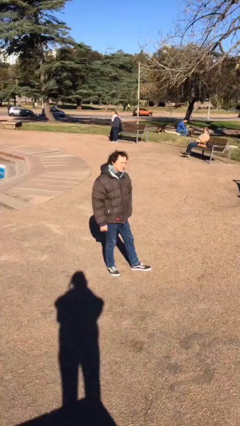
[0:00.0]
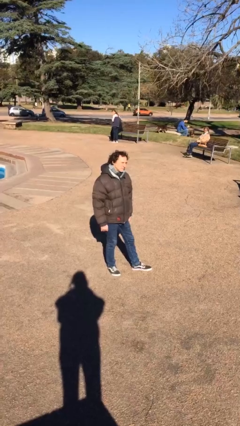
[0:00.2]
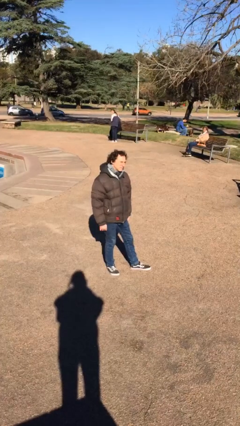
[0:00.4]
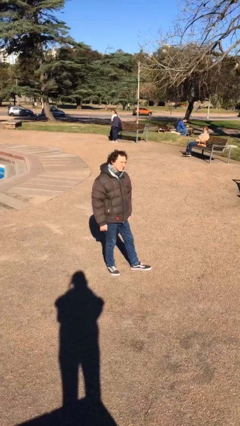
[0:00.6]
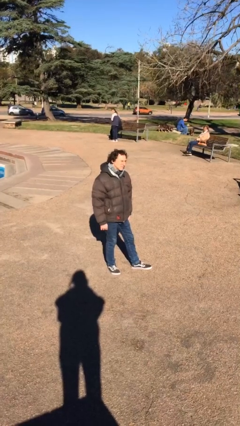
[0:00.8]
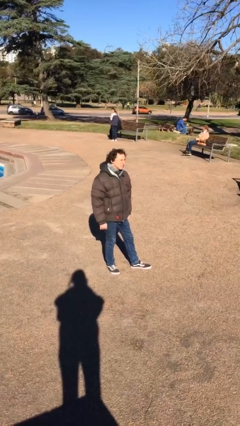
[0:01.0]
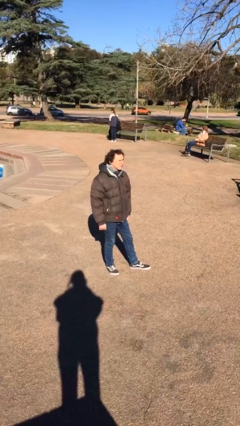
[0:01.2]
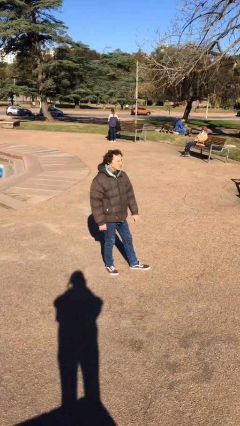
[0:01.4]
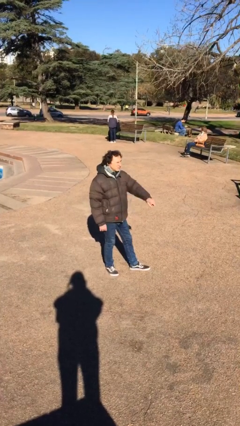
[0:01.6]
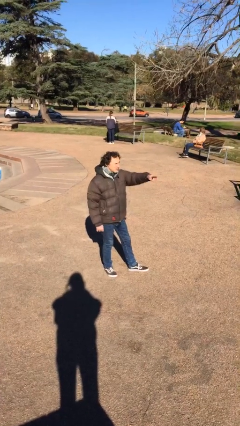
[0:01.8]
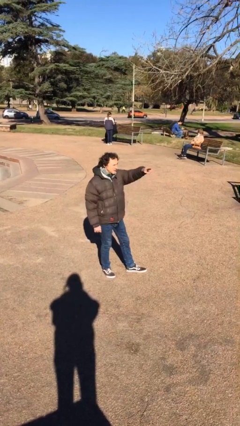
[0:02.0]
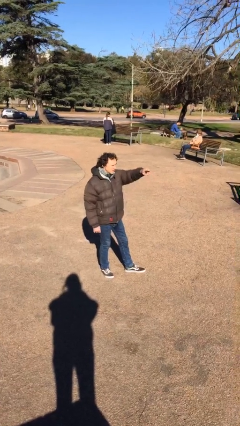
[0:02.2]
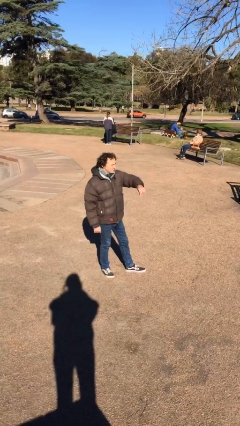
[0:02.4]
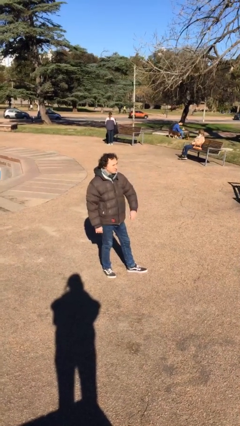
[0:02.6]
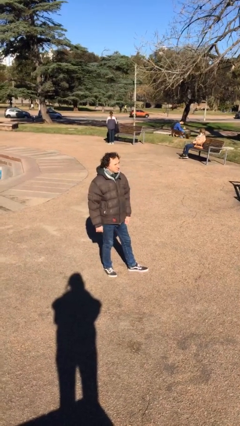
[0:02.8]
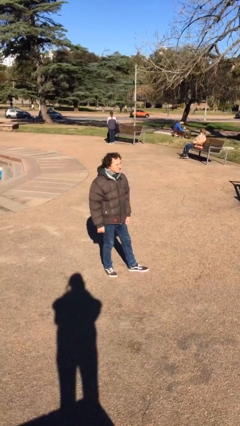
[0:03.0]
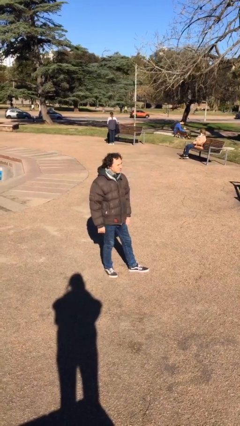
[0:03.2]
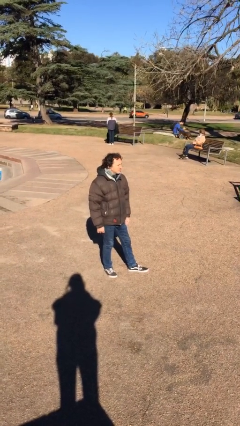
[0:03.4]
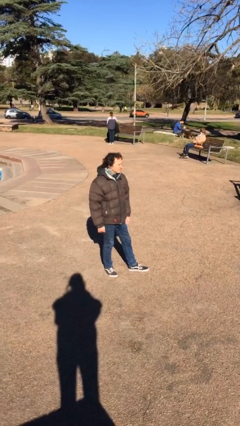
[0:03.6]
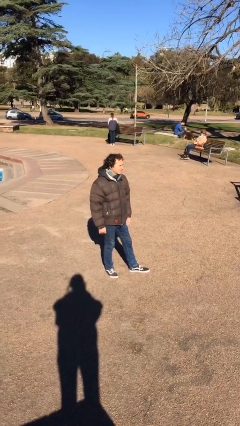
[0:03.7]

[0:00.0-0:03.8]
person points at person

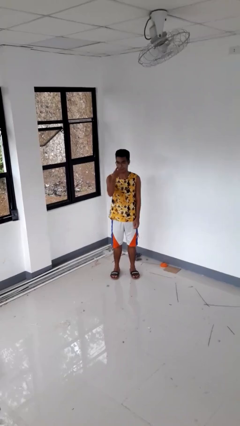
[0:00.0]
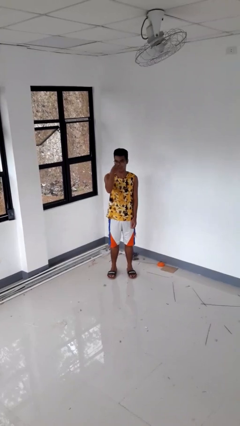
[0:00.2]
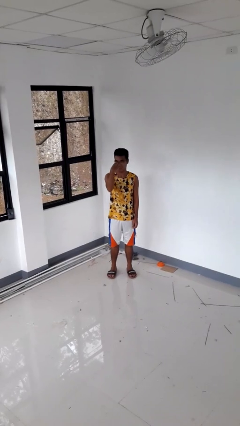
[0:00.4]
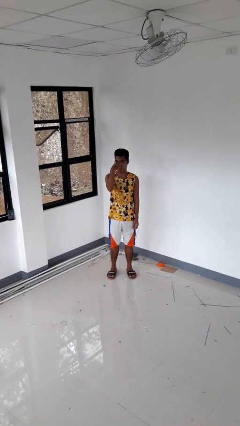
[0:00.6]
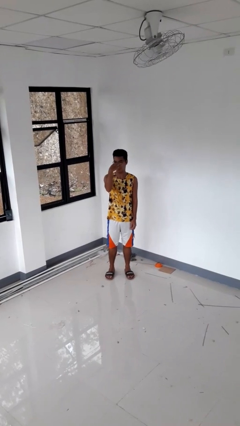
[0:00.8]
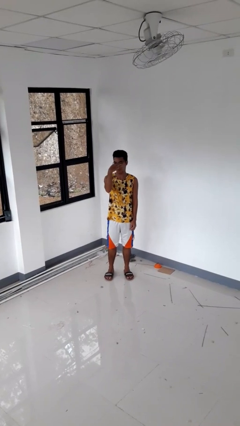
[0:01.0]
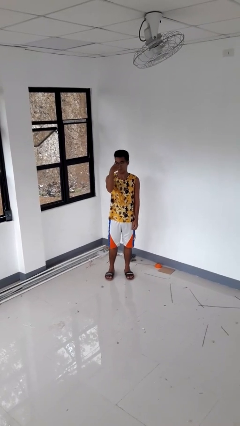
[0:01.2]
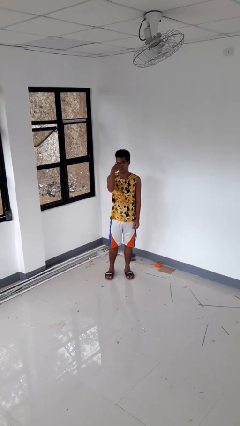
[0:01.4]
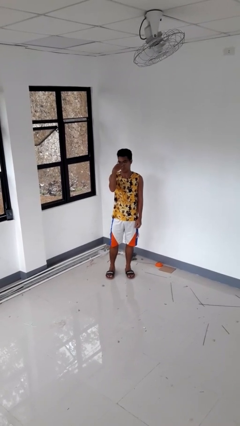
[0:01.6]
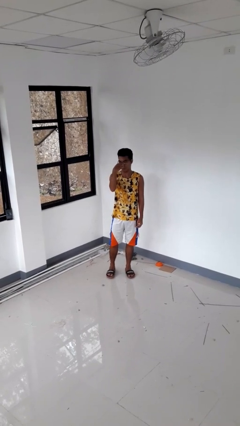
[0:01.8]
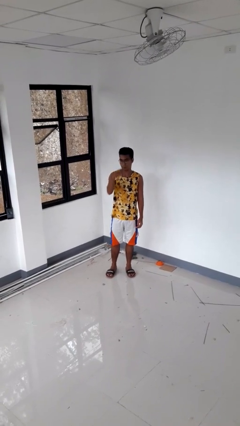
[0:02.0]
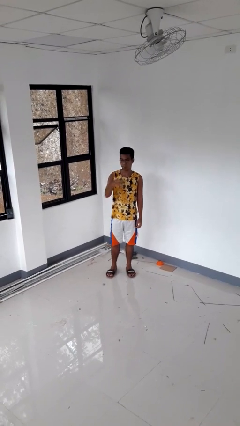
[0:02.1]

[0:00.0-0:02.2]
person gestures watch closely

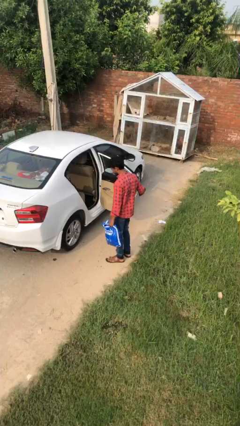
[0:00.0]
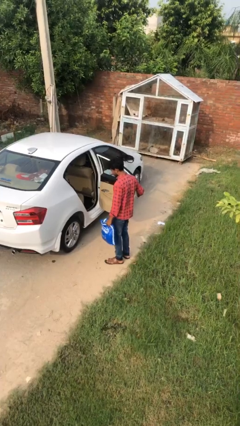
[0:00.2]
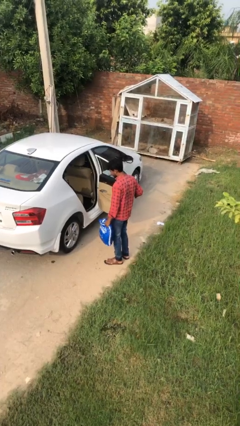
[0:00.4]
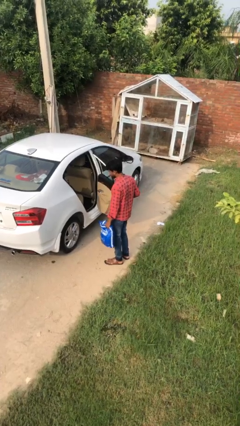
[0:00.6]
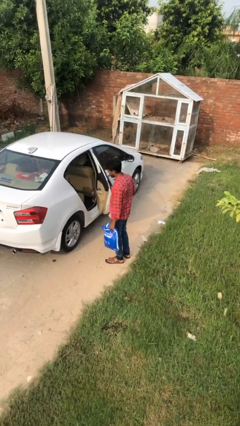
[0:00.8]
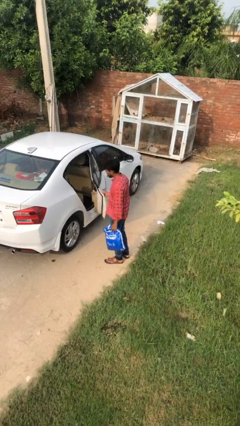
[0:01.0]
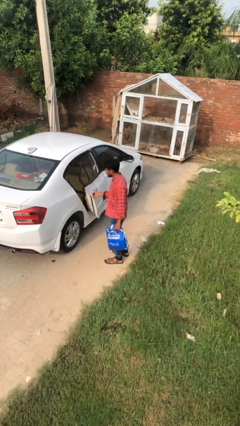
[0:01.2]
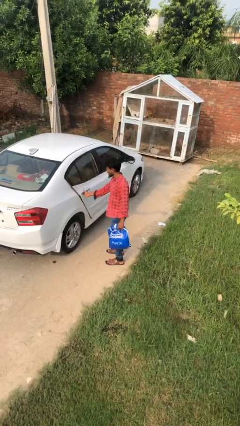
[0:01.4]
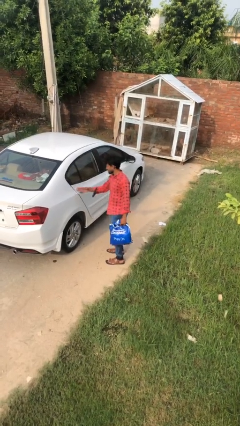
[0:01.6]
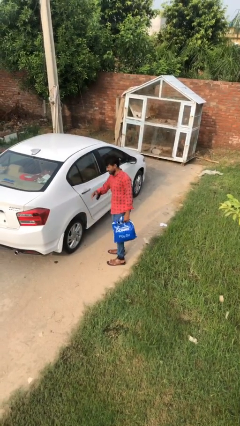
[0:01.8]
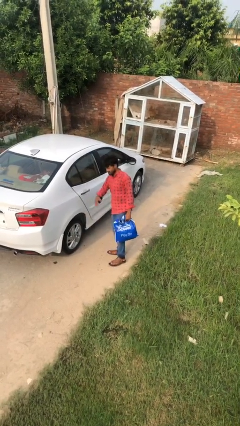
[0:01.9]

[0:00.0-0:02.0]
person closes car door

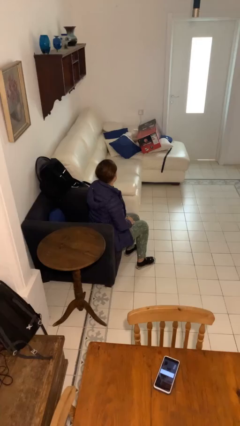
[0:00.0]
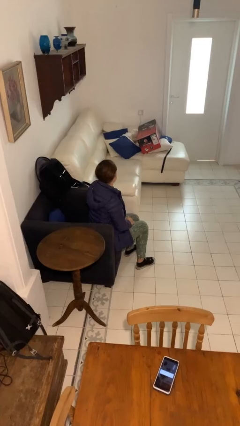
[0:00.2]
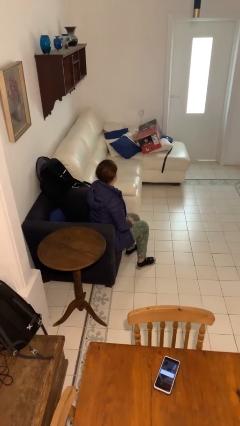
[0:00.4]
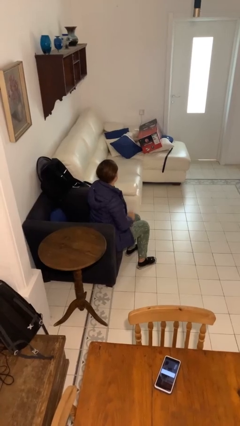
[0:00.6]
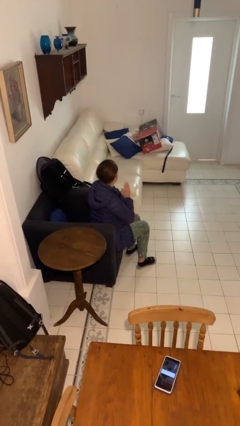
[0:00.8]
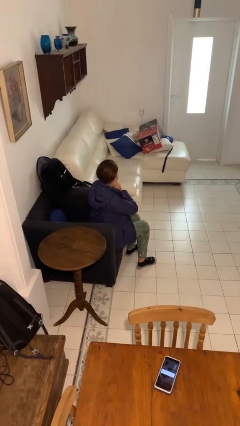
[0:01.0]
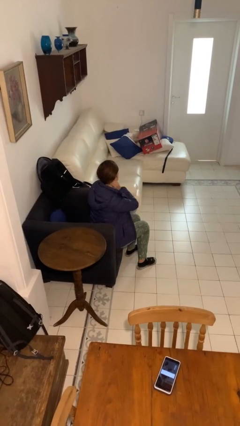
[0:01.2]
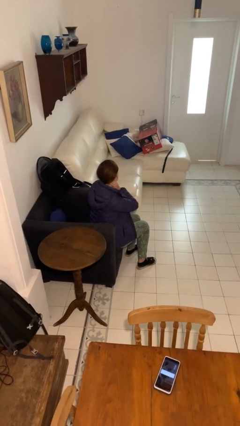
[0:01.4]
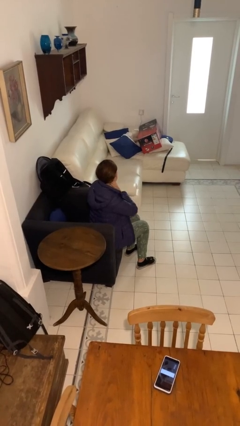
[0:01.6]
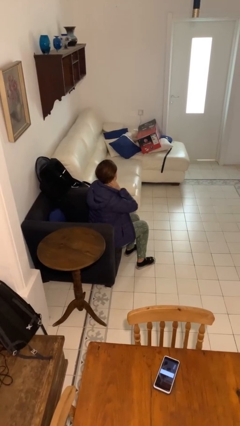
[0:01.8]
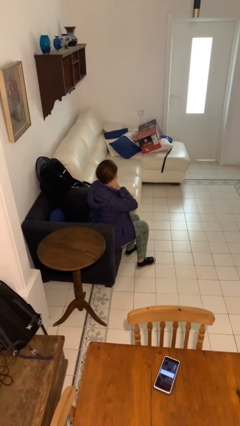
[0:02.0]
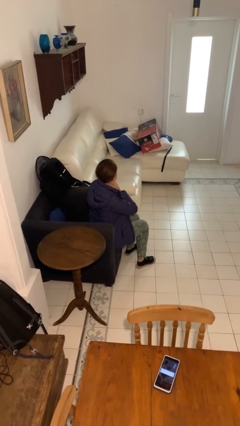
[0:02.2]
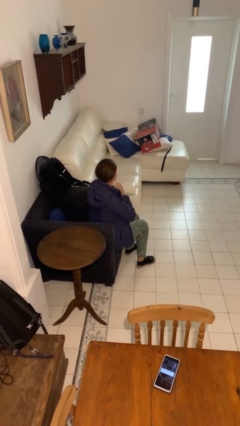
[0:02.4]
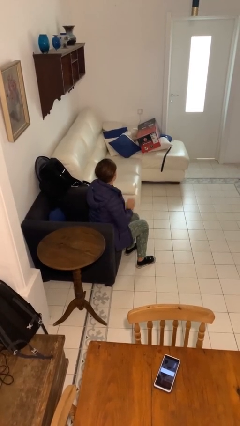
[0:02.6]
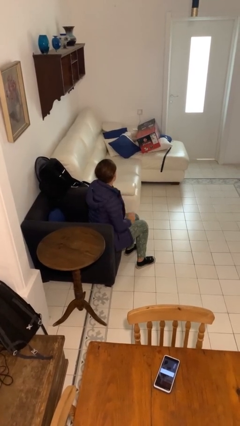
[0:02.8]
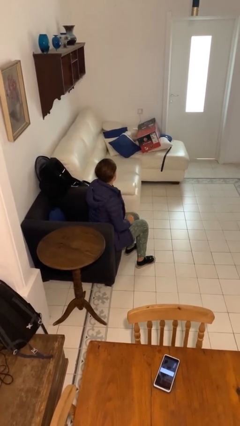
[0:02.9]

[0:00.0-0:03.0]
person rubs neck

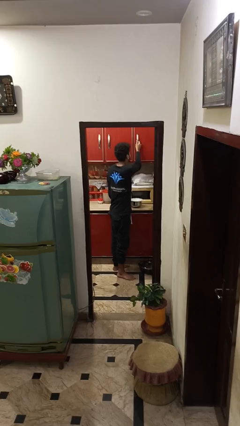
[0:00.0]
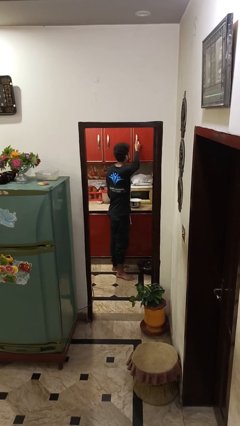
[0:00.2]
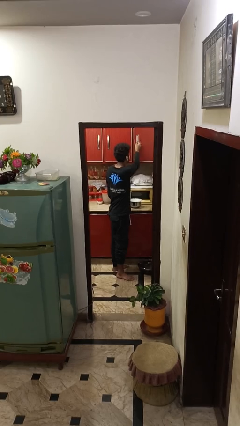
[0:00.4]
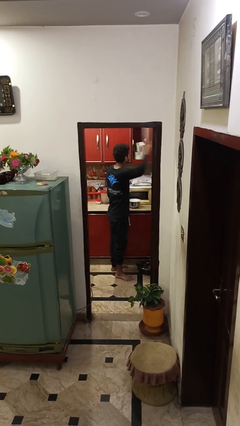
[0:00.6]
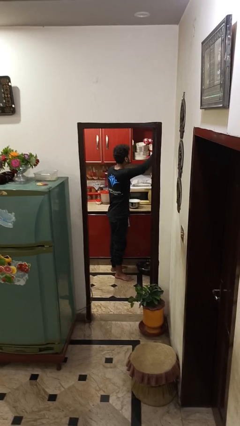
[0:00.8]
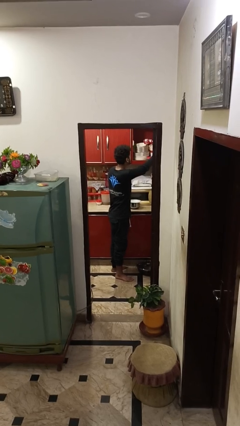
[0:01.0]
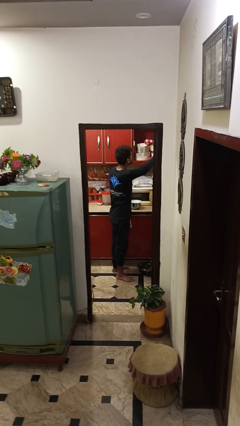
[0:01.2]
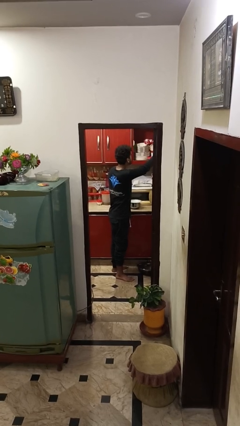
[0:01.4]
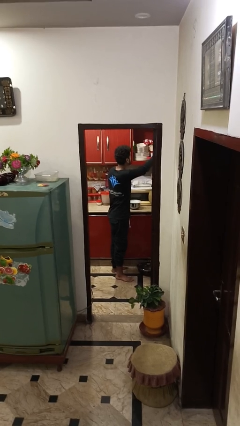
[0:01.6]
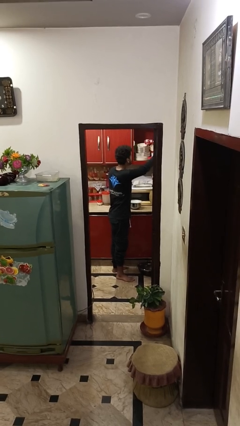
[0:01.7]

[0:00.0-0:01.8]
person opens cabinet

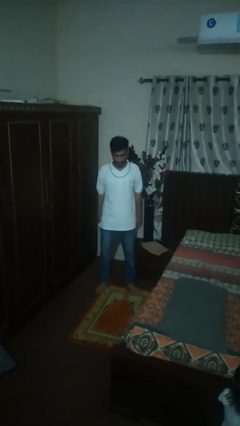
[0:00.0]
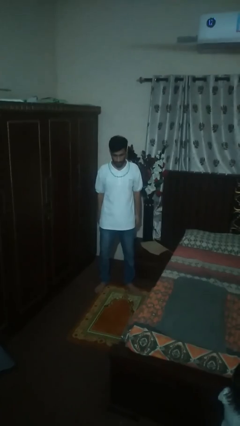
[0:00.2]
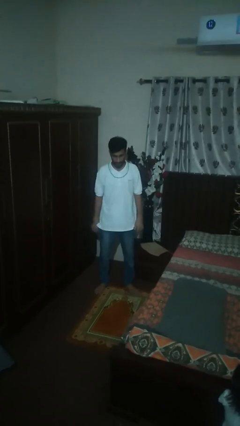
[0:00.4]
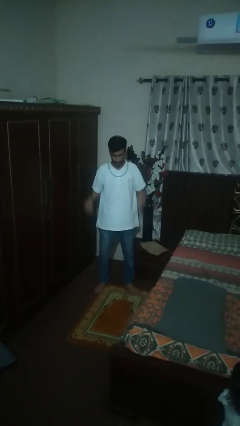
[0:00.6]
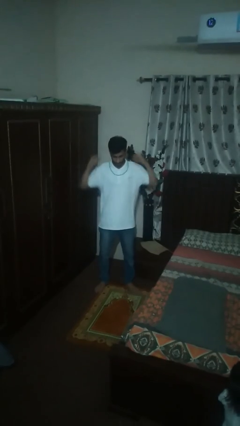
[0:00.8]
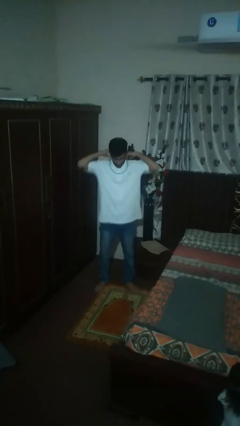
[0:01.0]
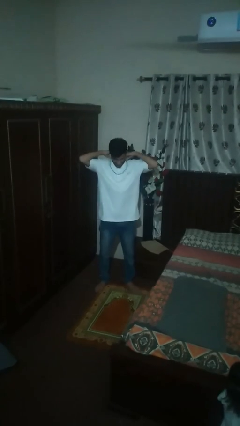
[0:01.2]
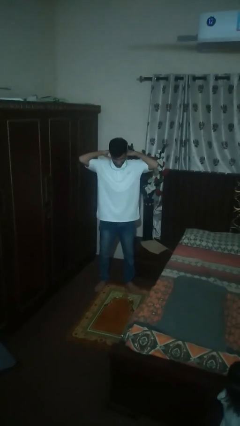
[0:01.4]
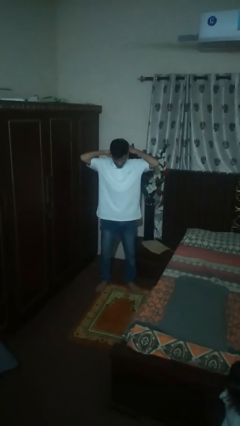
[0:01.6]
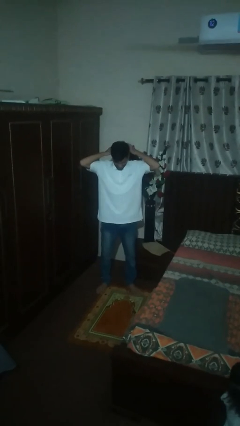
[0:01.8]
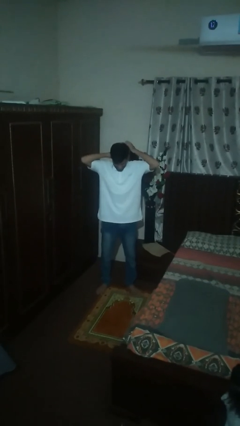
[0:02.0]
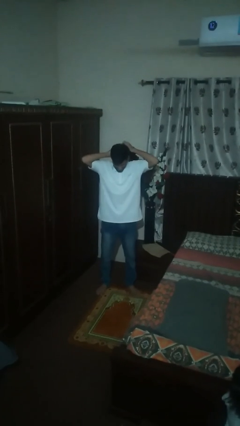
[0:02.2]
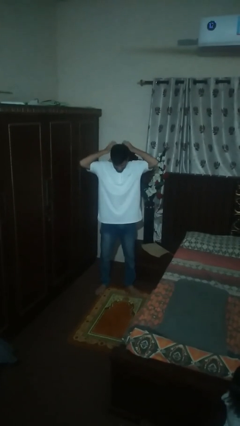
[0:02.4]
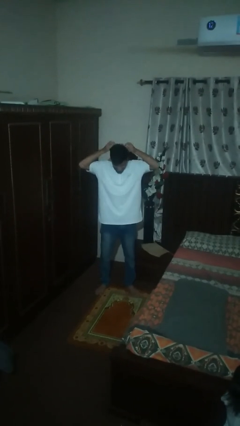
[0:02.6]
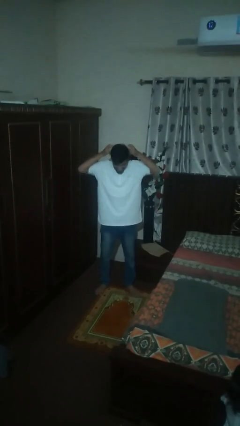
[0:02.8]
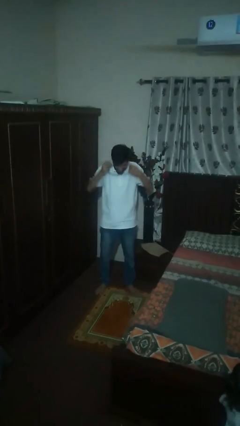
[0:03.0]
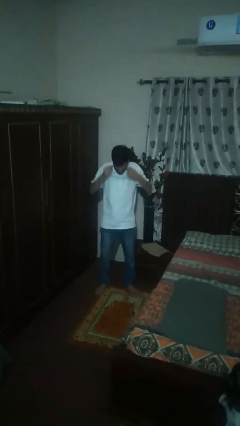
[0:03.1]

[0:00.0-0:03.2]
person takes off necklace

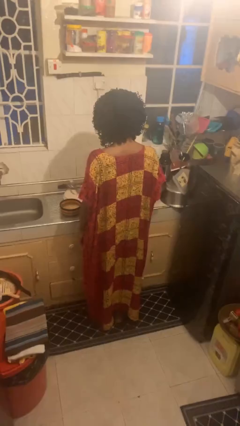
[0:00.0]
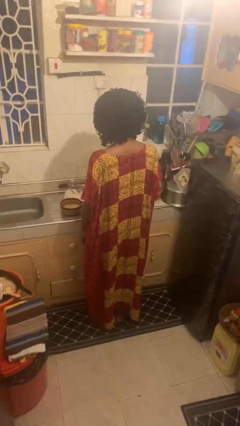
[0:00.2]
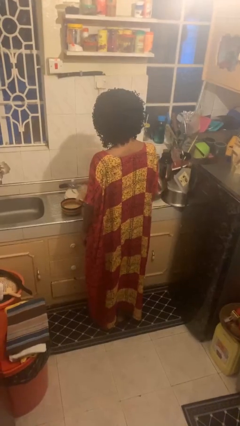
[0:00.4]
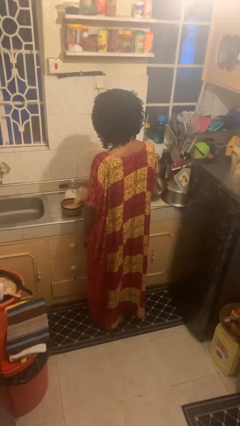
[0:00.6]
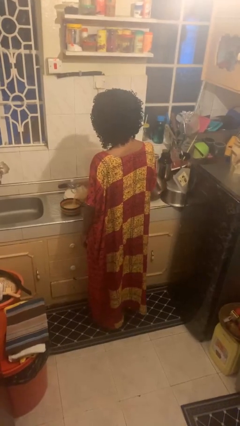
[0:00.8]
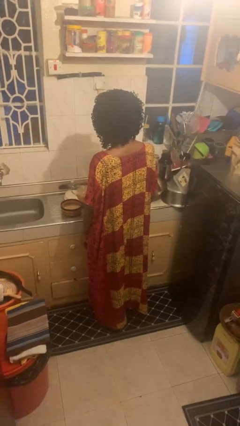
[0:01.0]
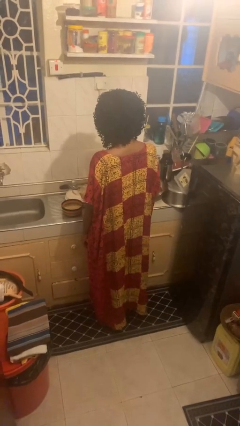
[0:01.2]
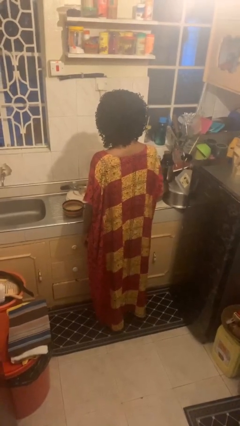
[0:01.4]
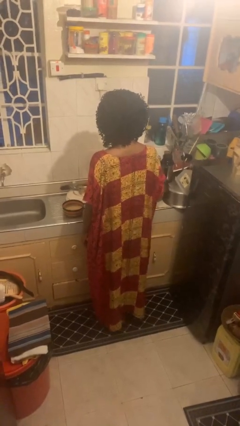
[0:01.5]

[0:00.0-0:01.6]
person pours into bowl
